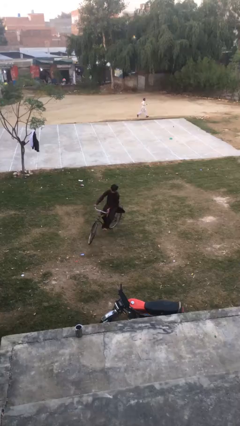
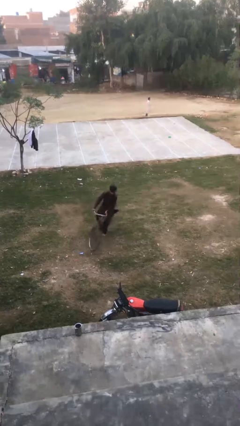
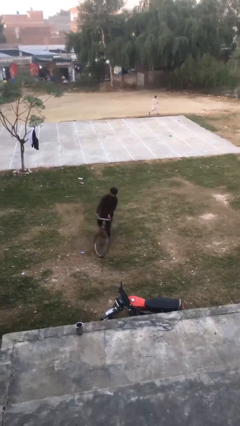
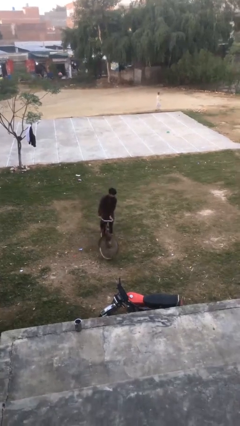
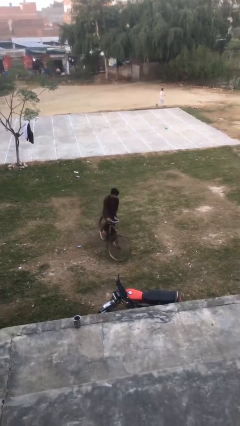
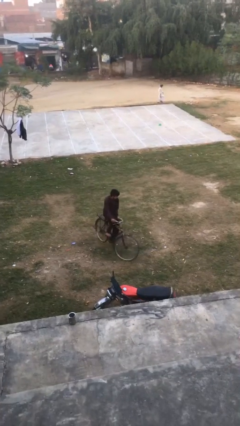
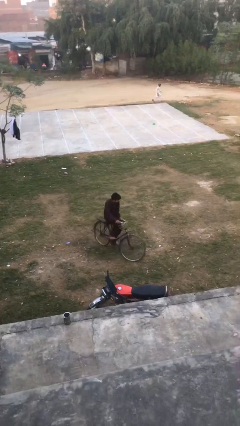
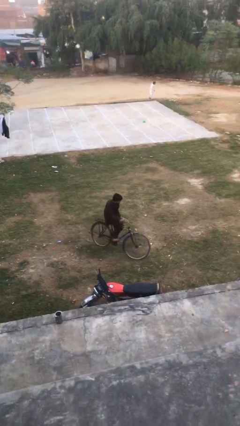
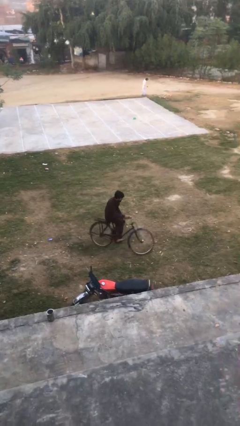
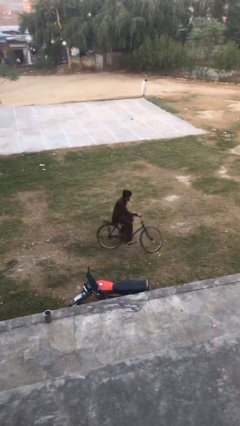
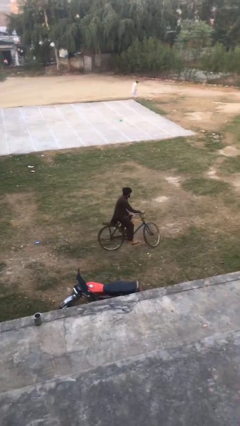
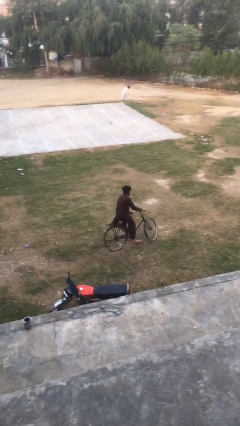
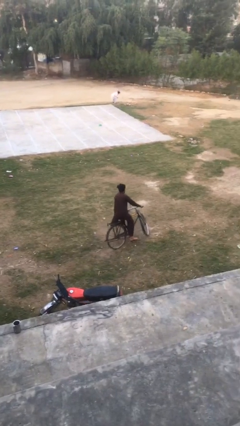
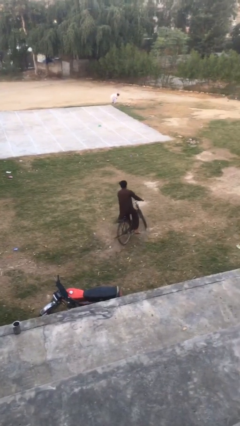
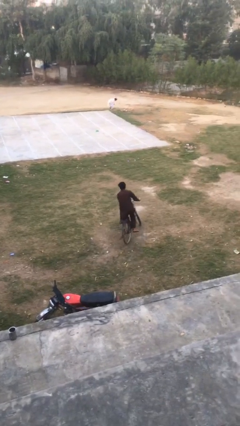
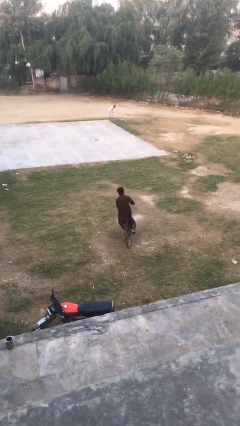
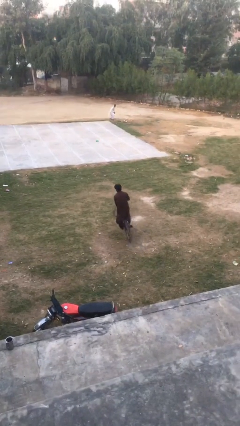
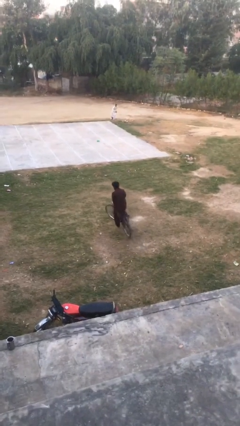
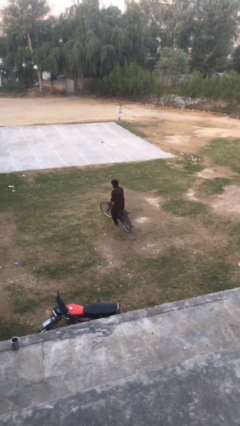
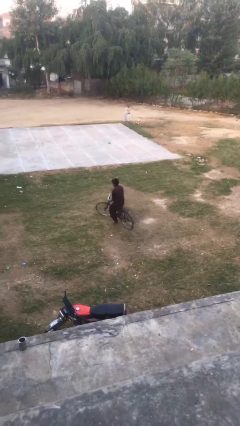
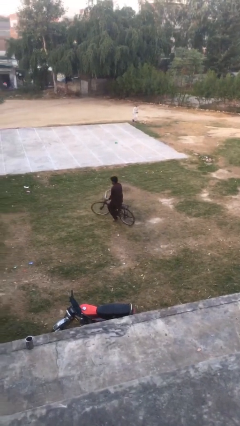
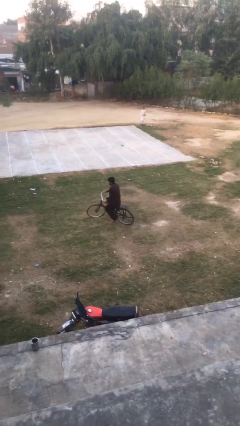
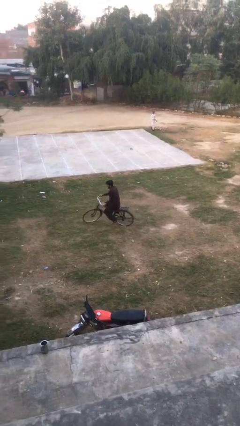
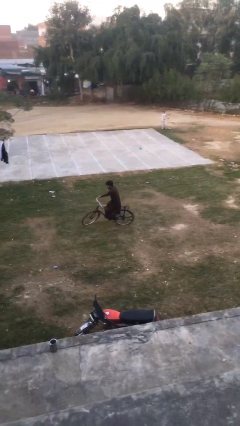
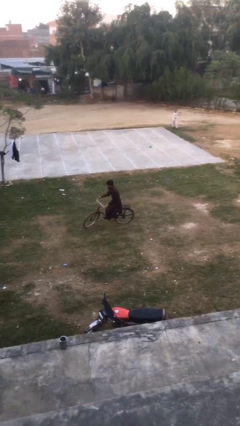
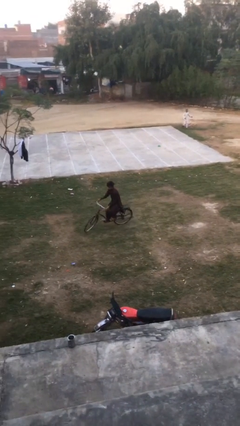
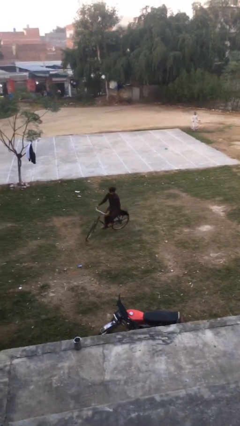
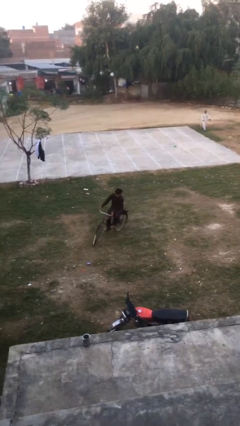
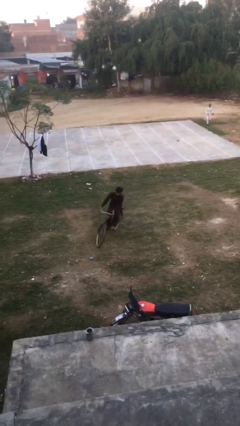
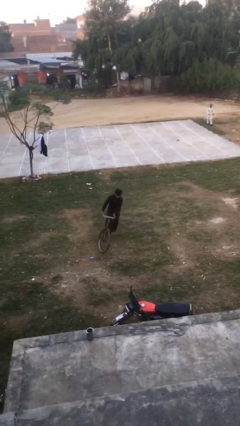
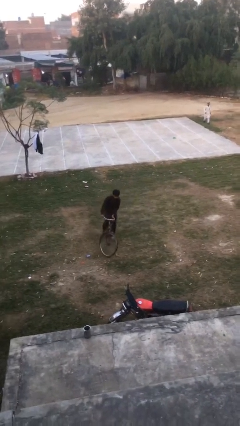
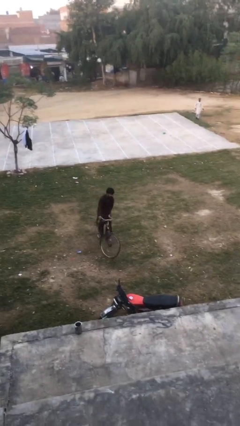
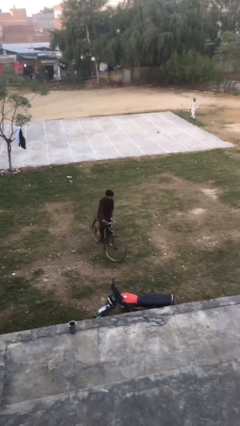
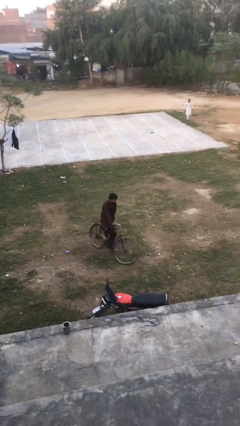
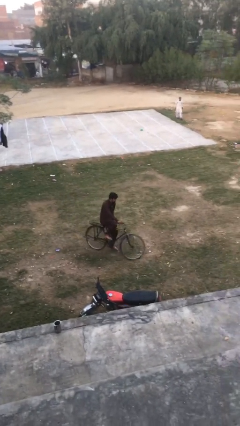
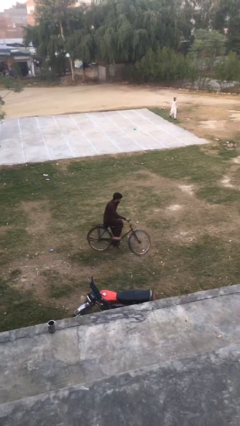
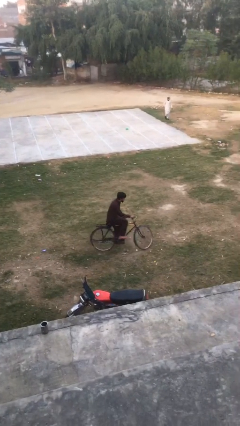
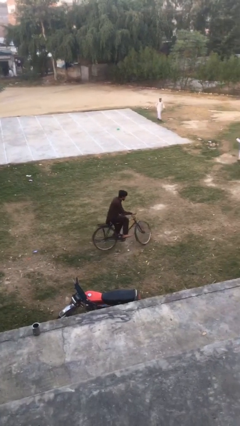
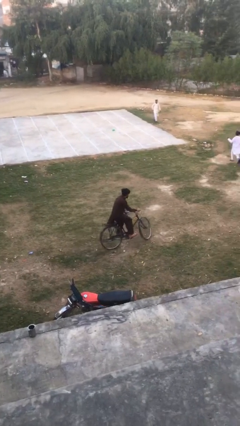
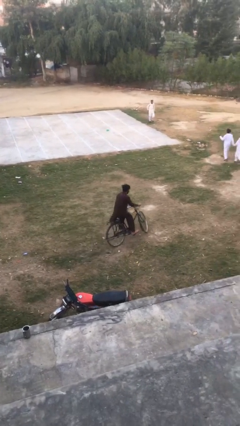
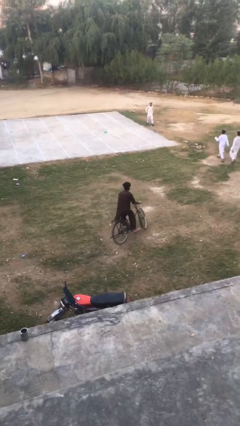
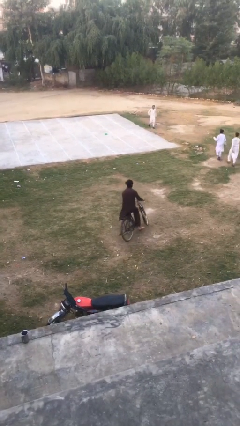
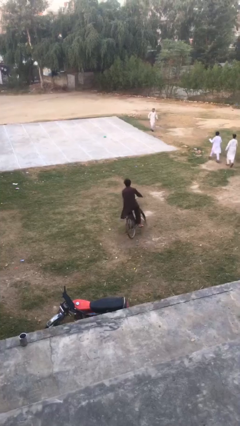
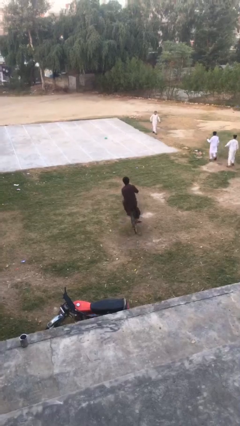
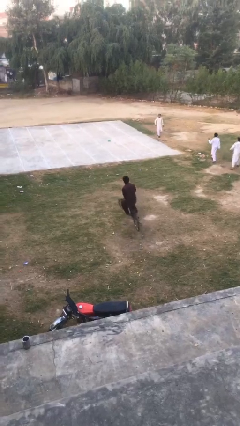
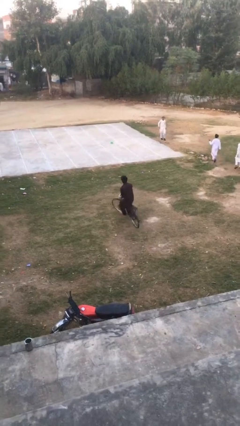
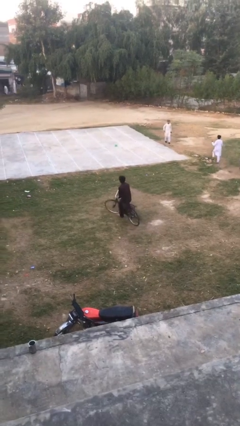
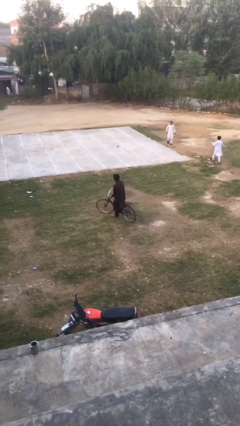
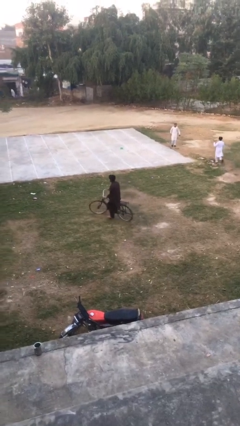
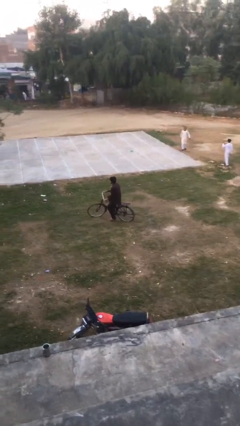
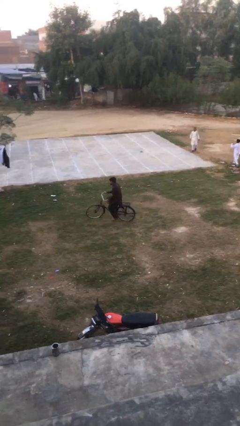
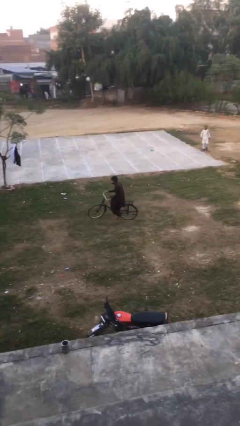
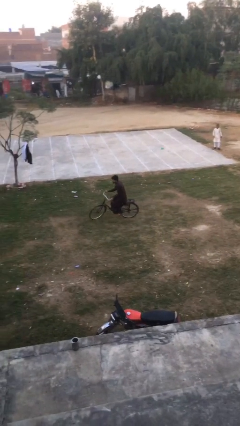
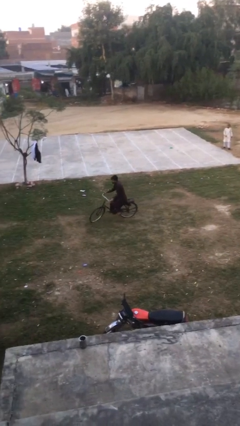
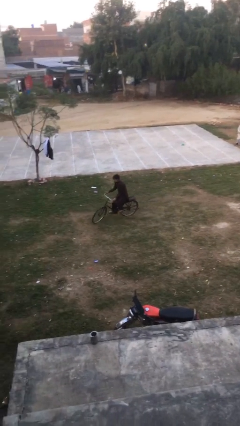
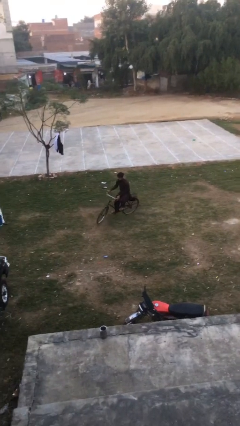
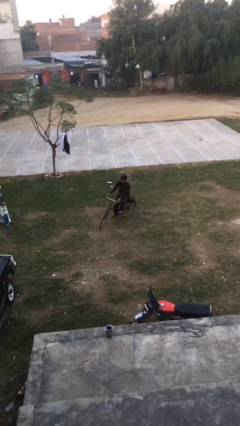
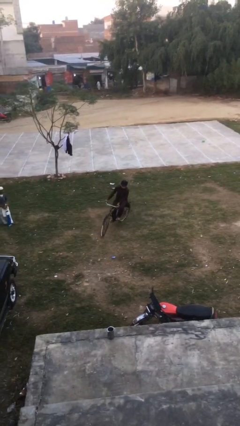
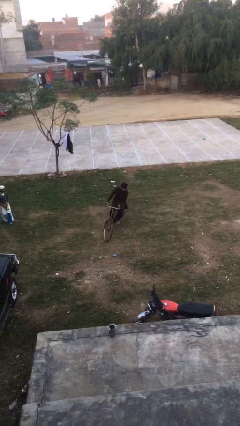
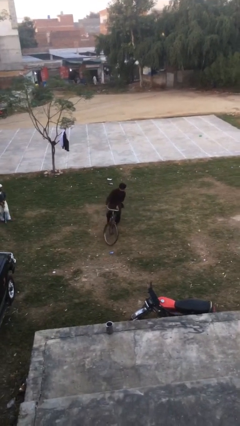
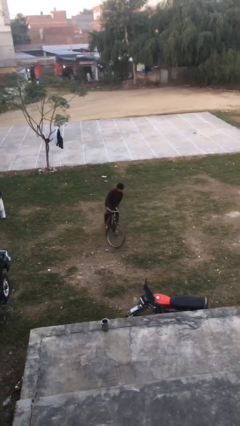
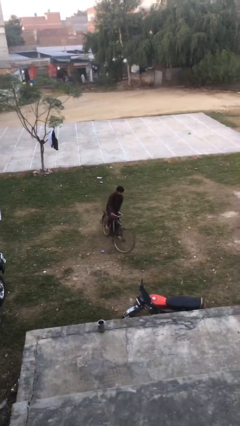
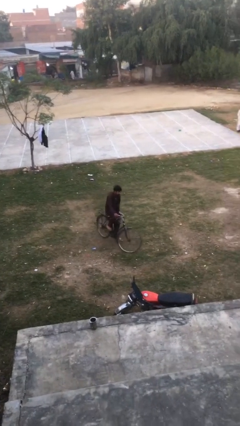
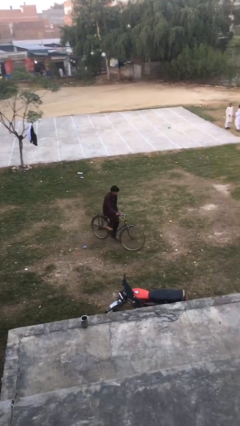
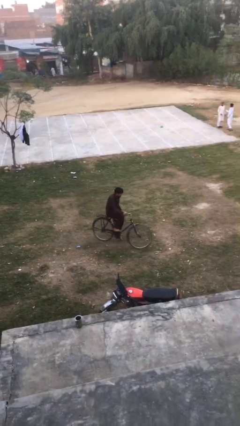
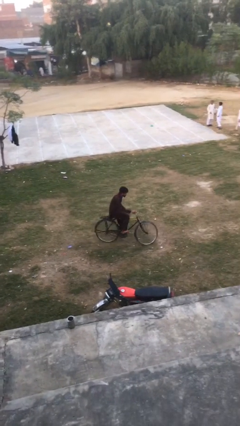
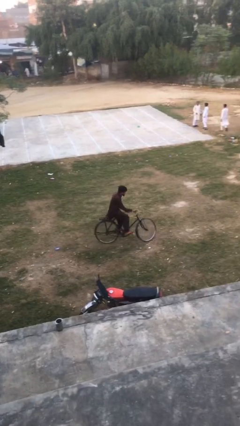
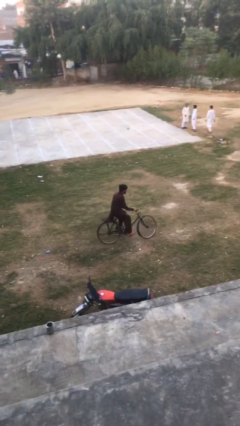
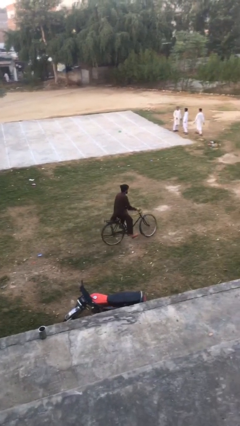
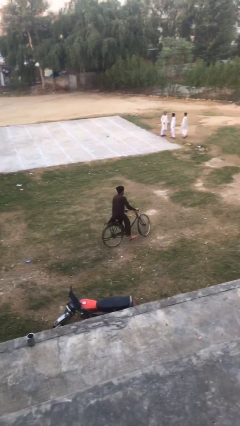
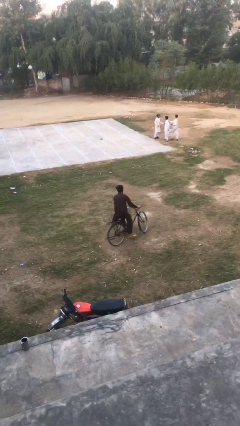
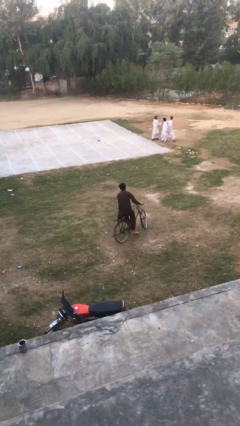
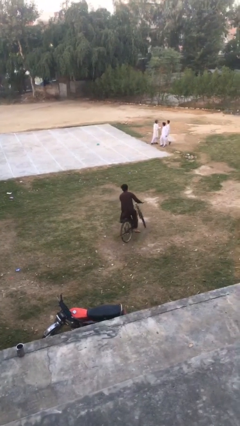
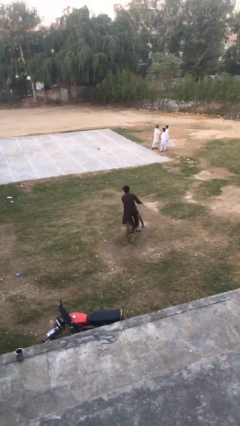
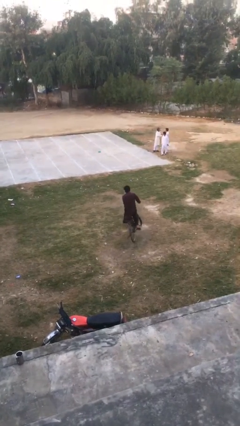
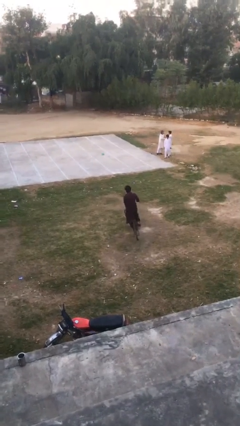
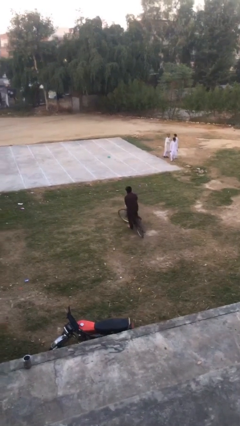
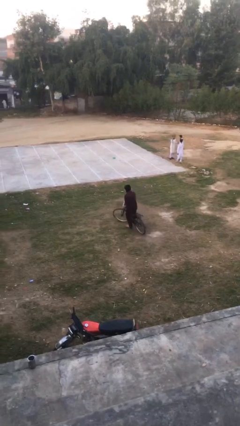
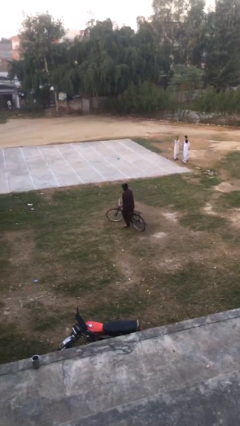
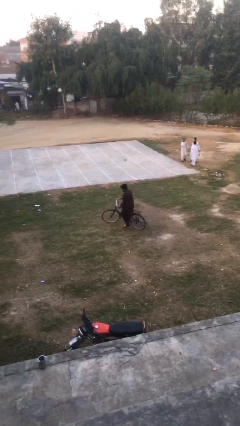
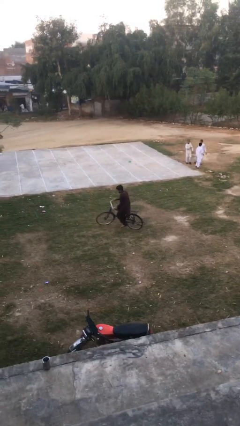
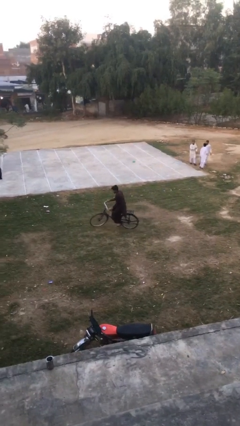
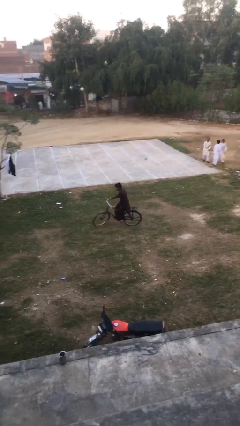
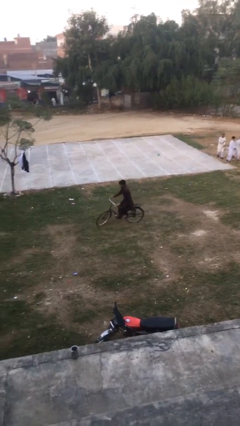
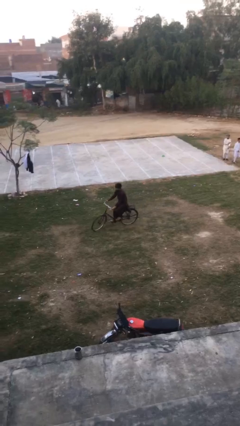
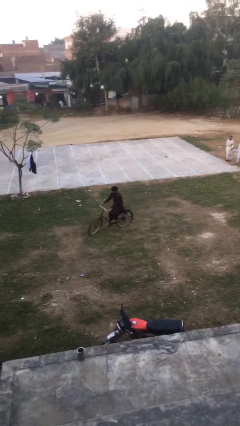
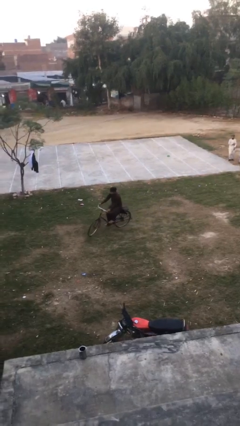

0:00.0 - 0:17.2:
person rides bicycle

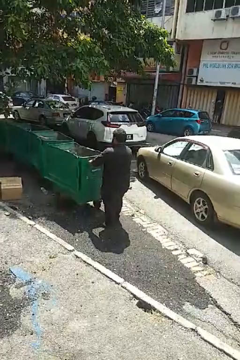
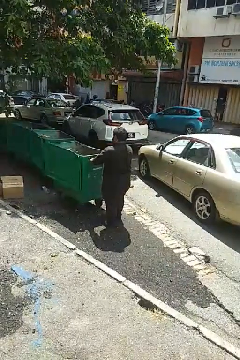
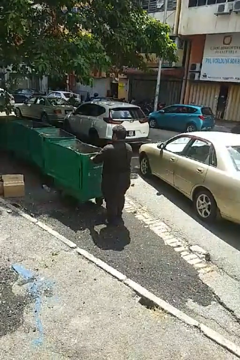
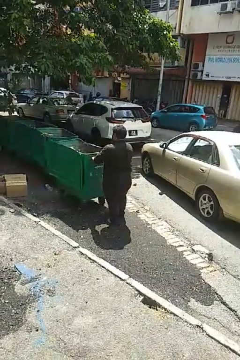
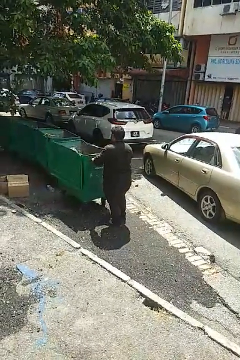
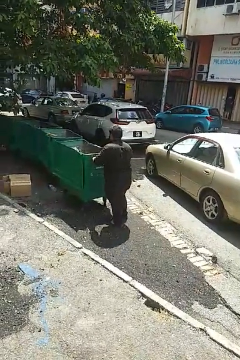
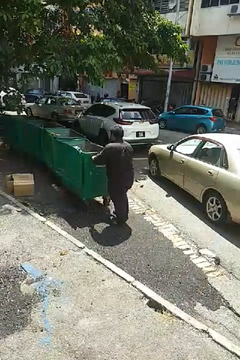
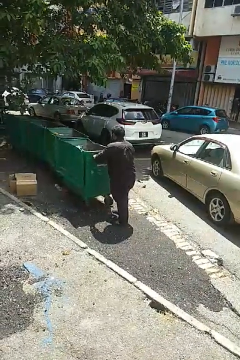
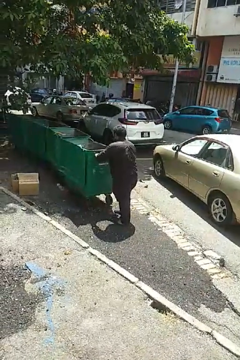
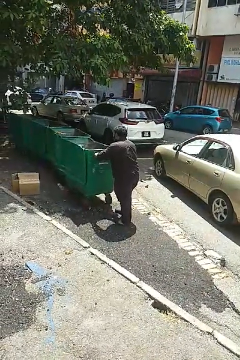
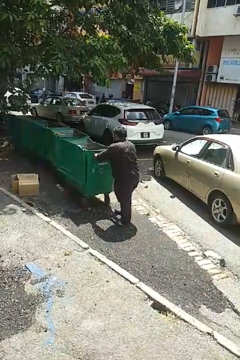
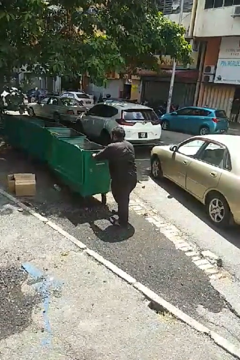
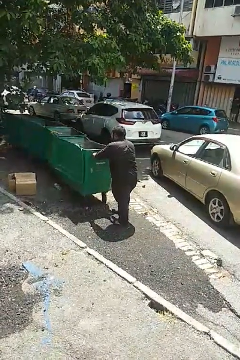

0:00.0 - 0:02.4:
person pushes wheeled trashcan
